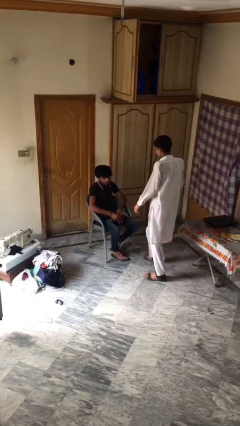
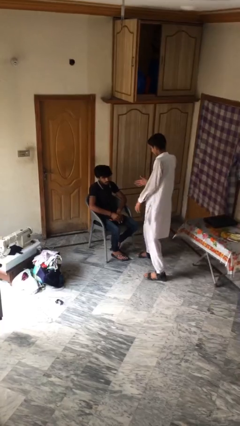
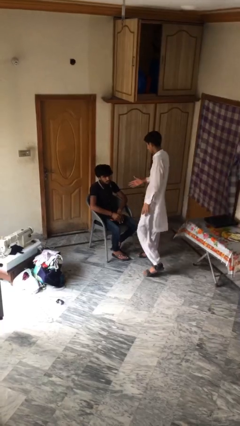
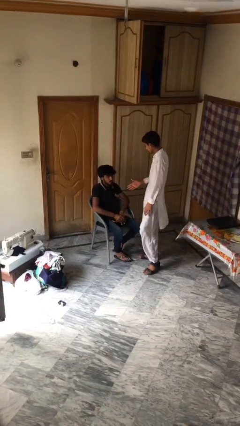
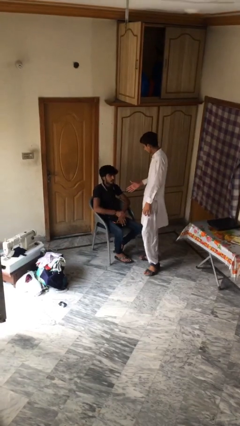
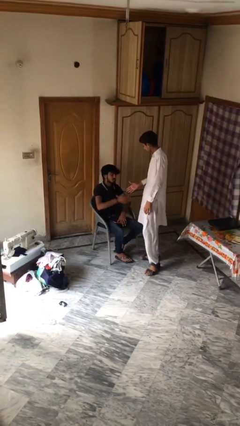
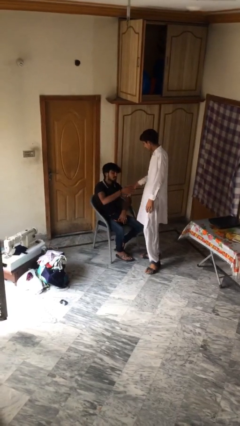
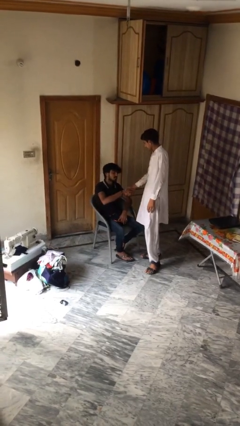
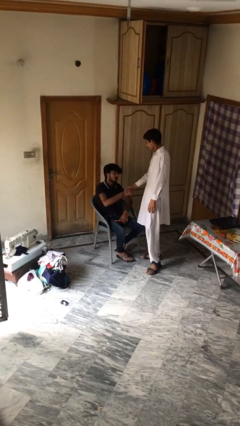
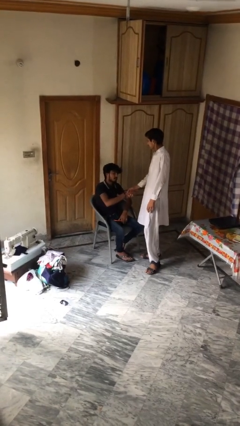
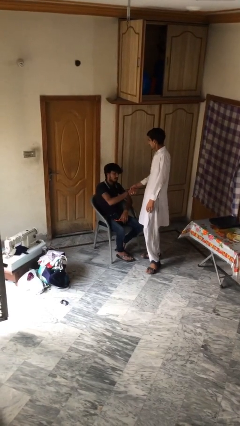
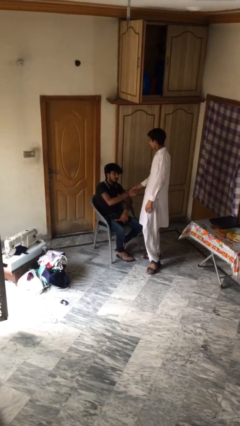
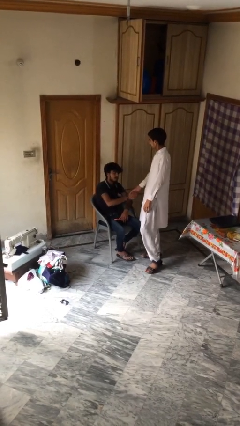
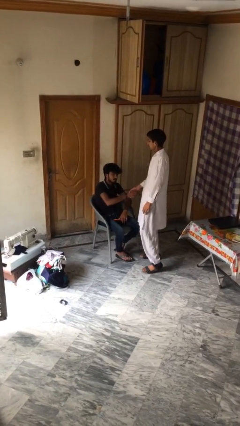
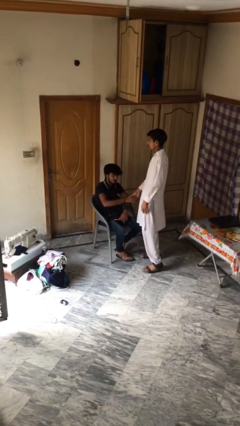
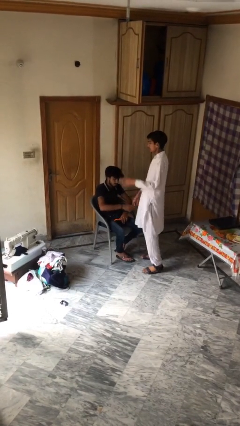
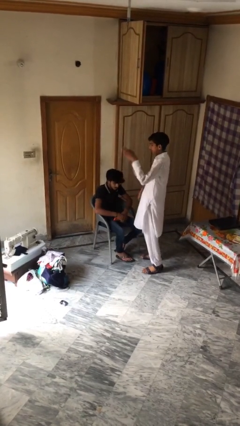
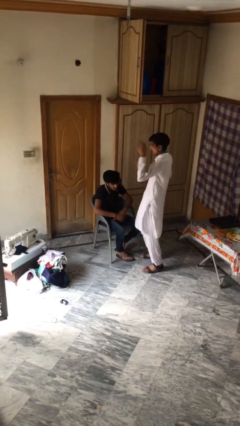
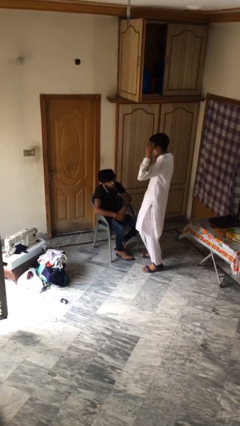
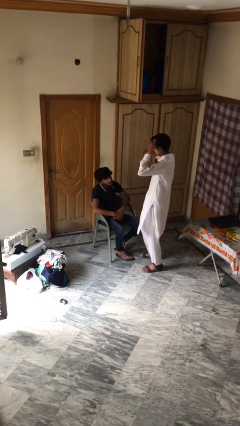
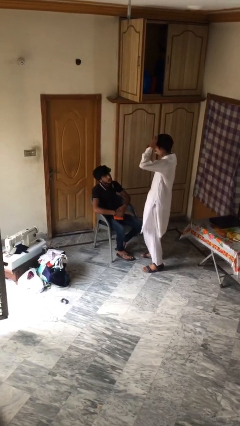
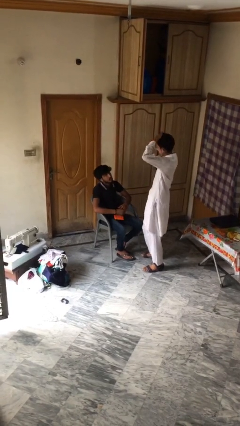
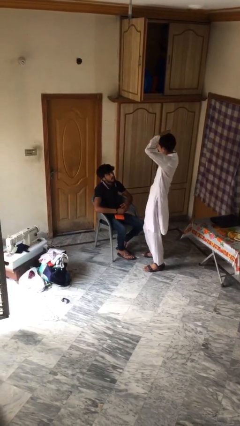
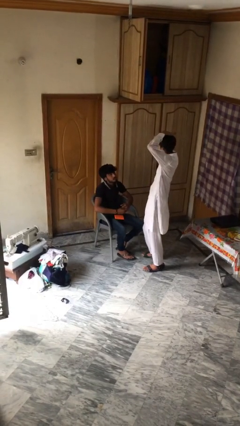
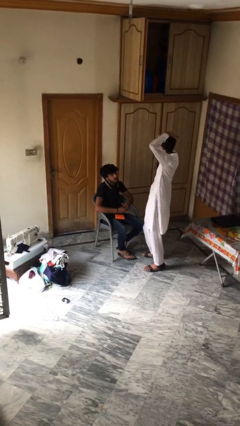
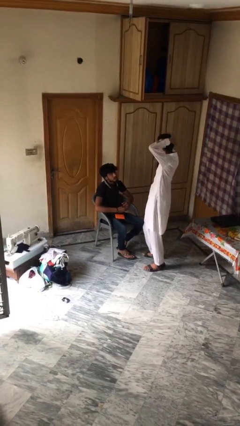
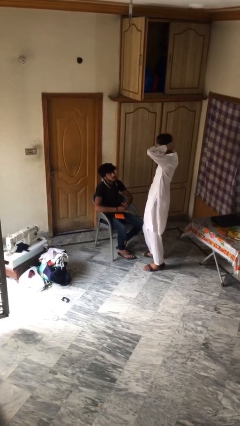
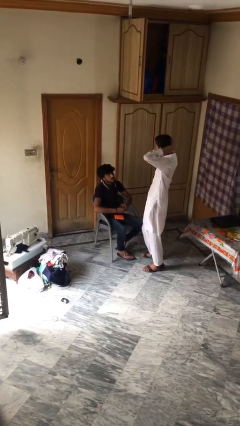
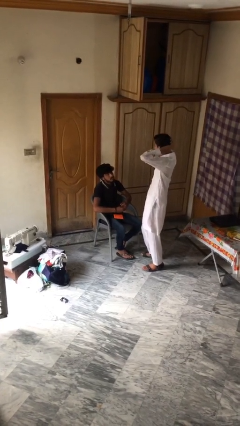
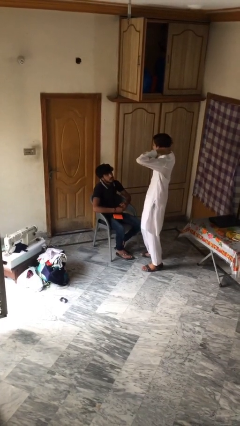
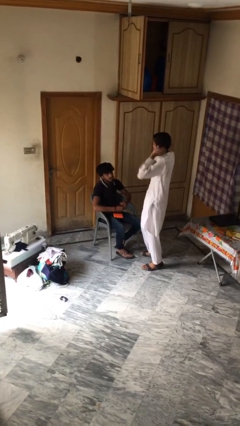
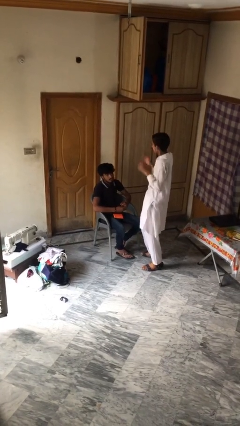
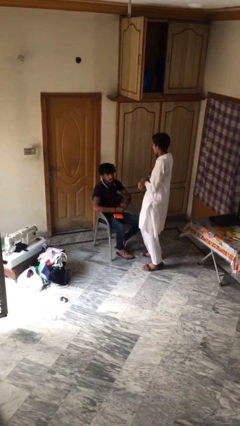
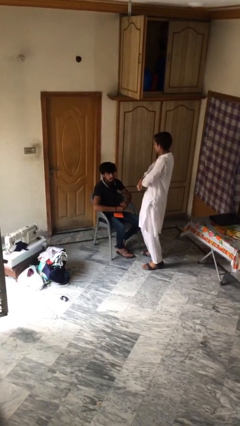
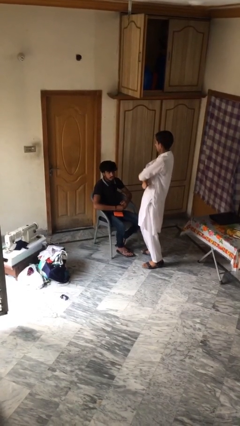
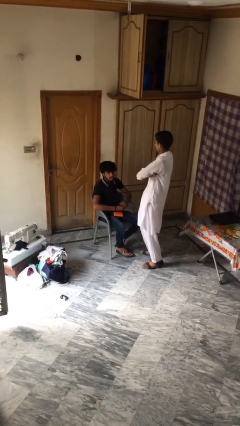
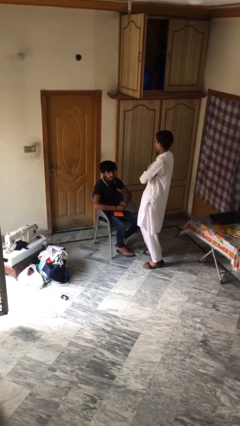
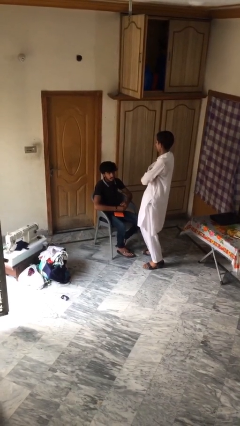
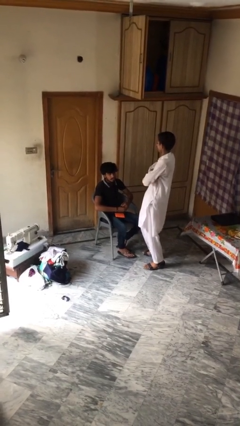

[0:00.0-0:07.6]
person shakes hand

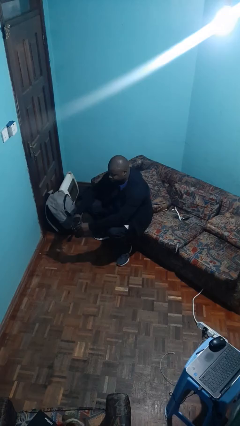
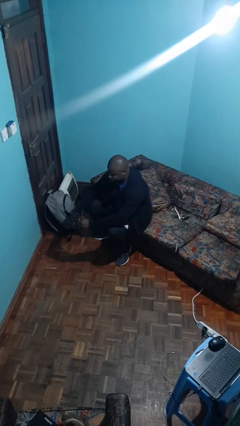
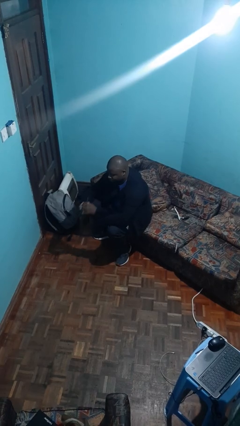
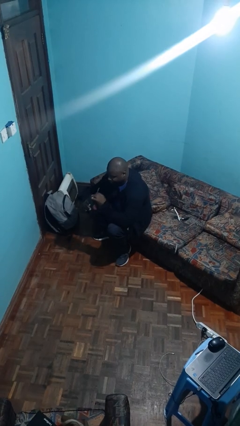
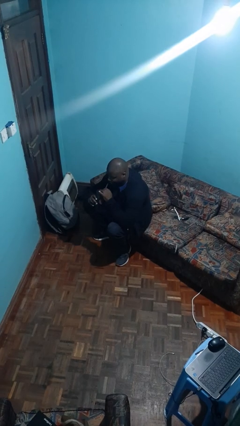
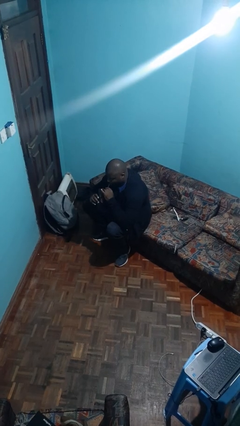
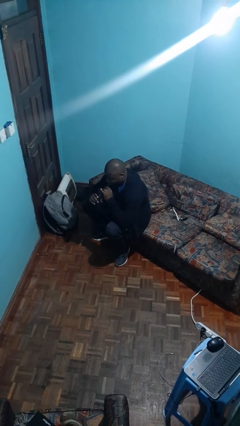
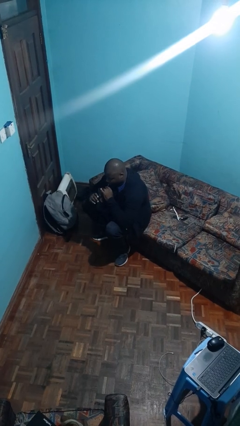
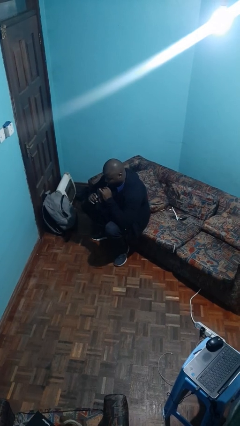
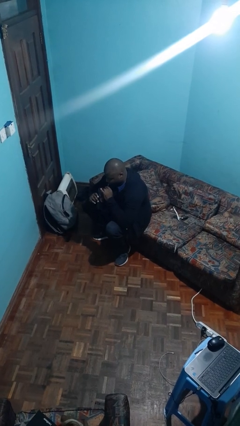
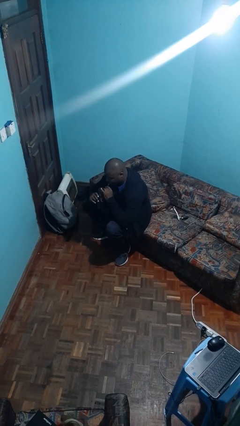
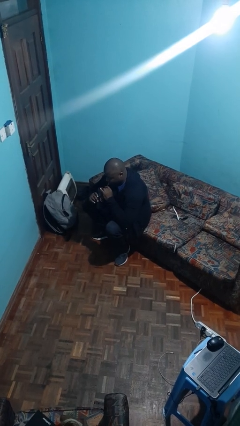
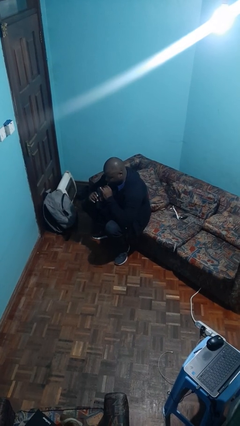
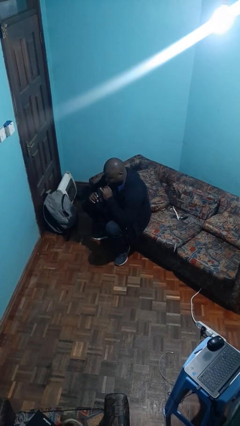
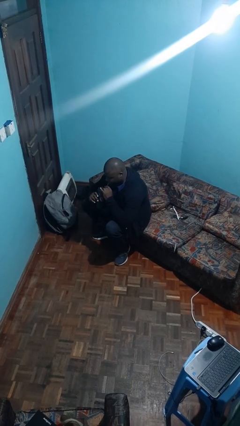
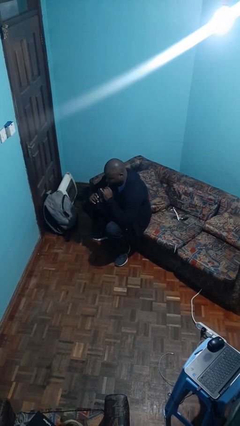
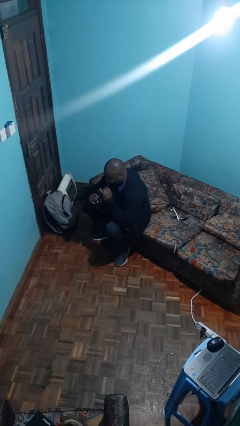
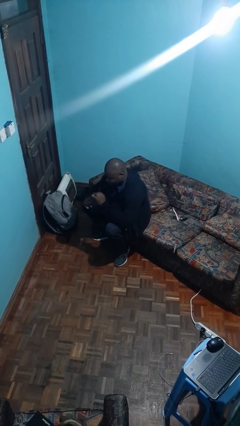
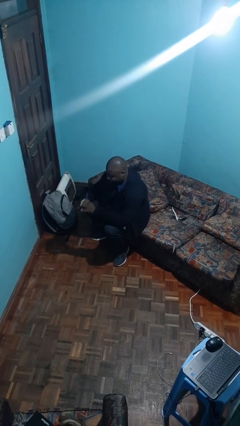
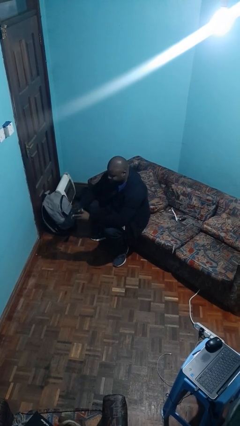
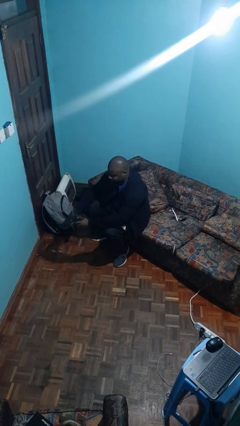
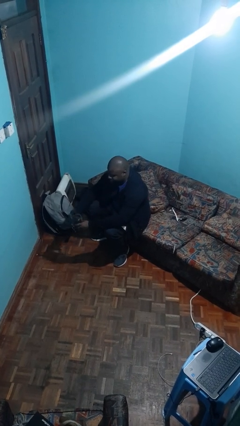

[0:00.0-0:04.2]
person drinks from straw

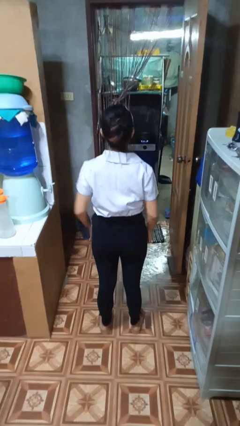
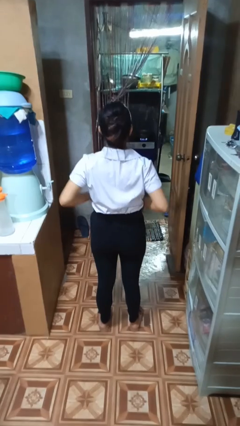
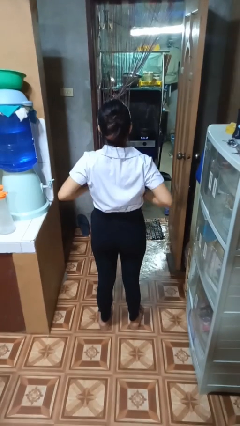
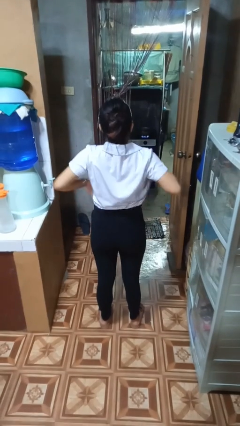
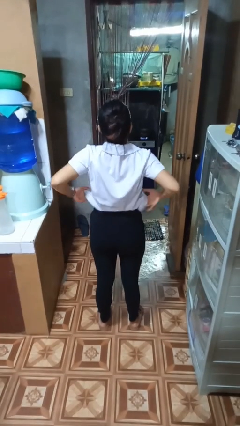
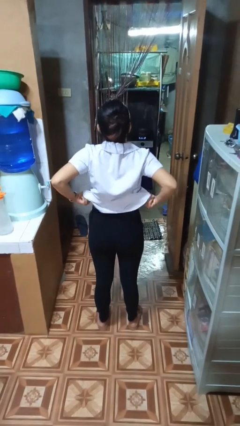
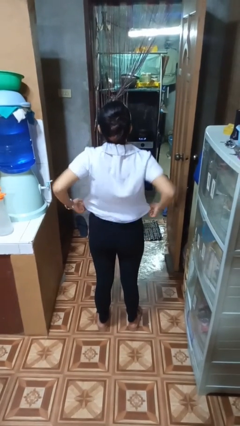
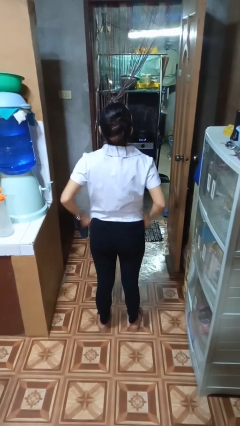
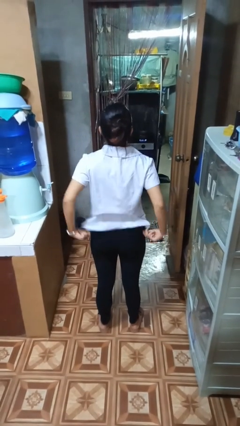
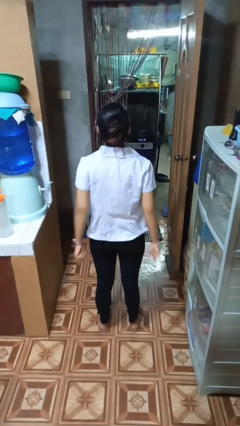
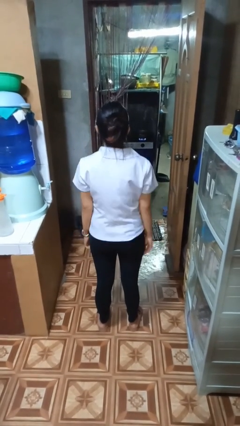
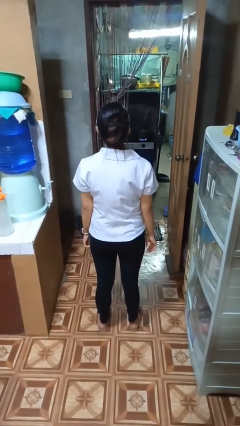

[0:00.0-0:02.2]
person untucks shirt

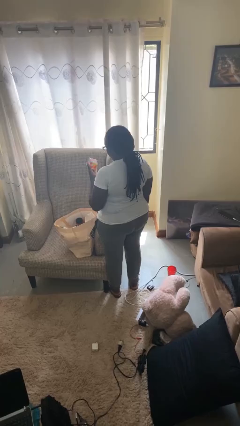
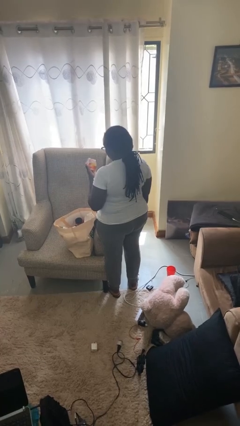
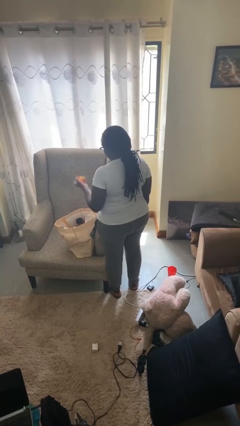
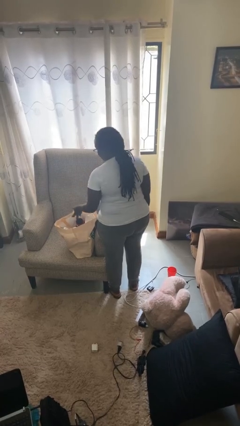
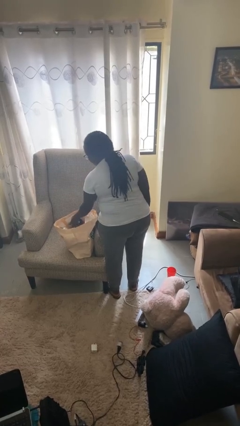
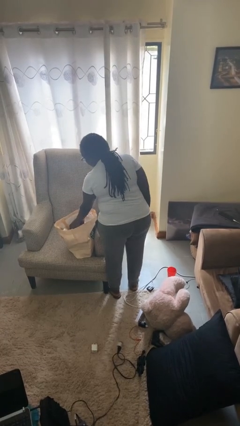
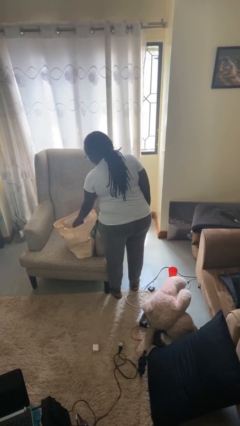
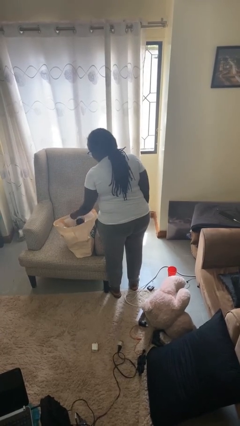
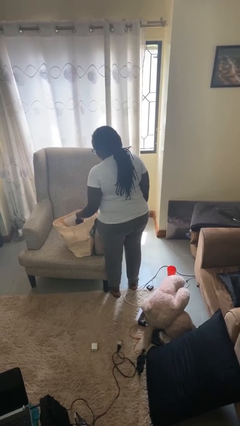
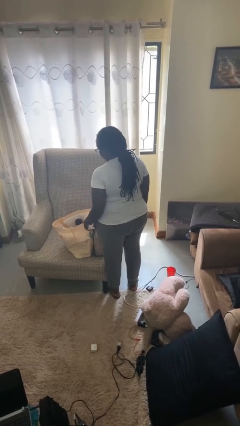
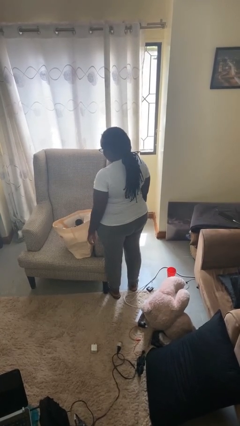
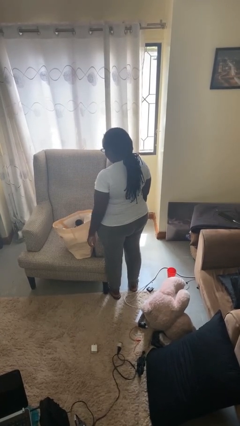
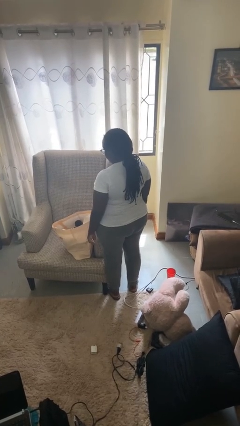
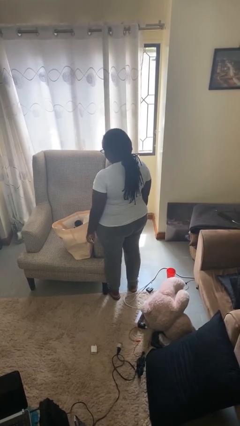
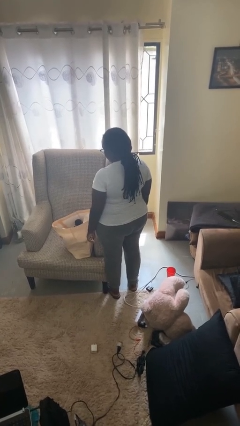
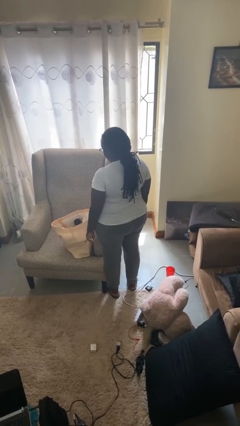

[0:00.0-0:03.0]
person puts object into bag

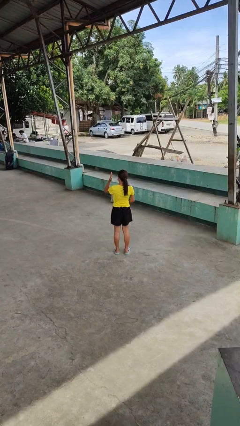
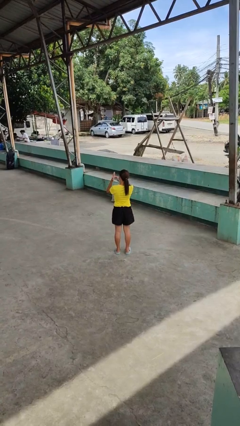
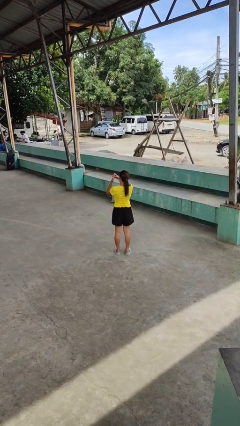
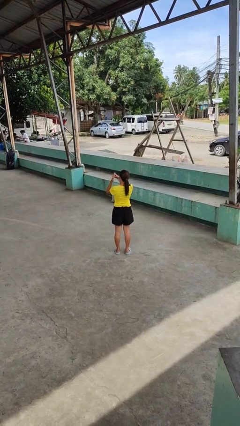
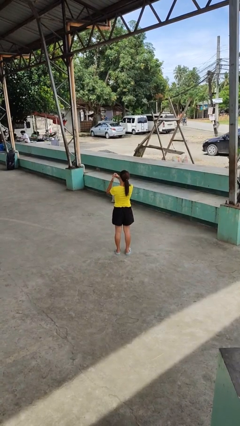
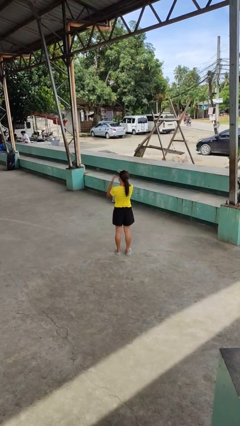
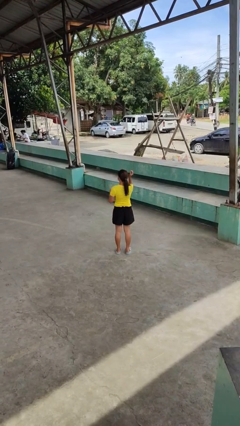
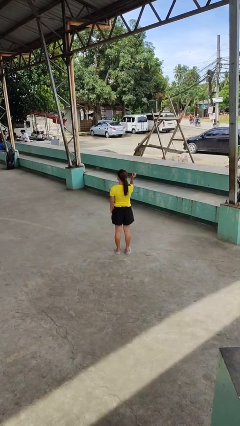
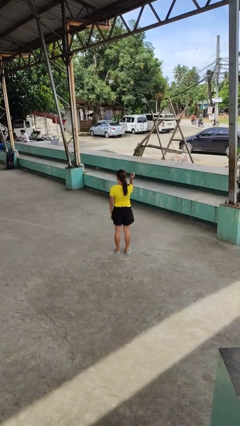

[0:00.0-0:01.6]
person takes off ring
